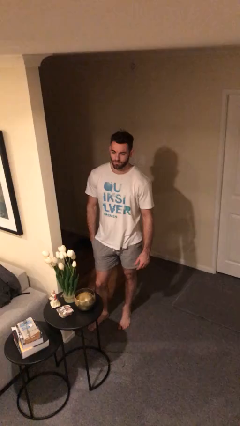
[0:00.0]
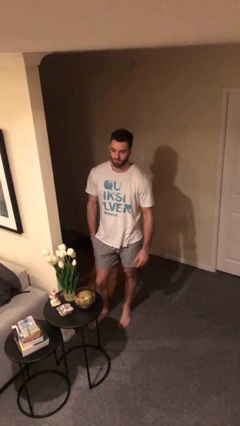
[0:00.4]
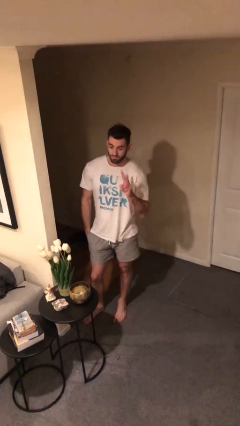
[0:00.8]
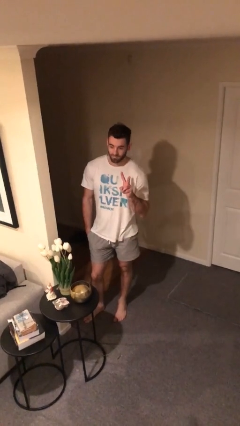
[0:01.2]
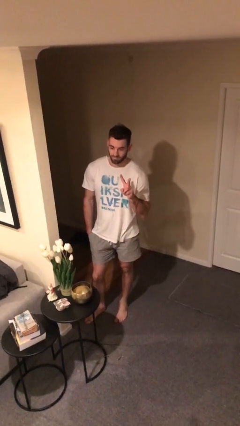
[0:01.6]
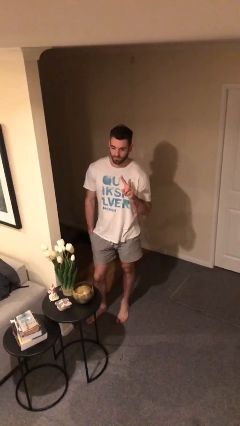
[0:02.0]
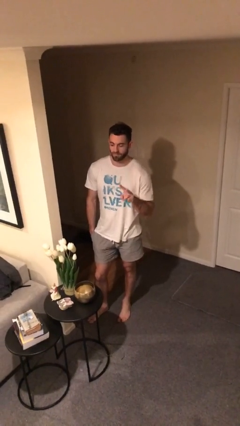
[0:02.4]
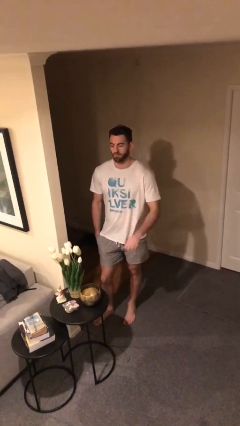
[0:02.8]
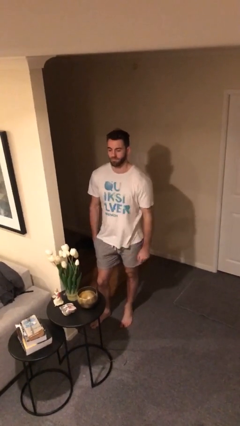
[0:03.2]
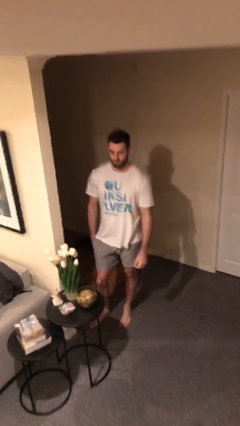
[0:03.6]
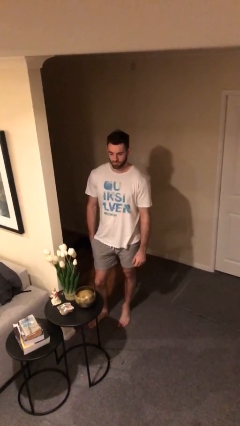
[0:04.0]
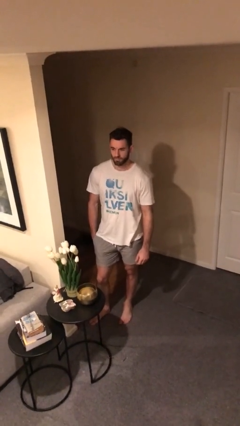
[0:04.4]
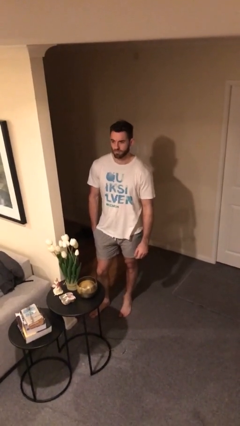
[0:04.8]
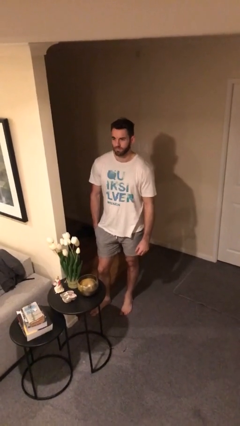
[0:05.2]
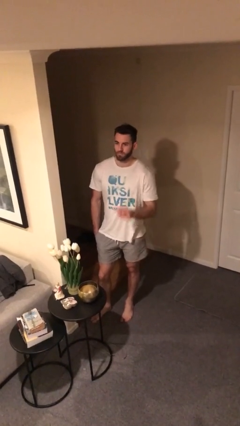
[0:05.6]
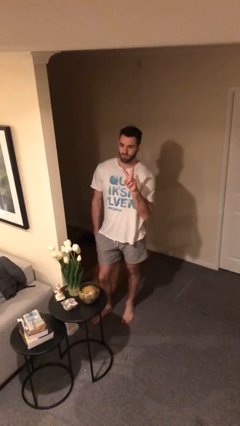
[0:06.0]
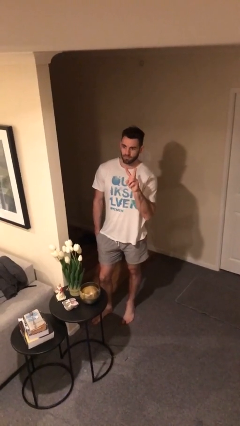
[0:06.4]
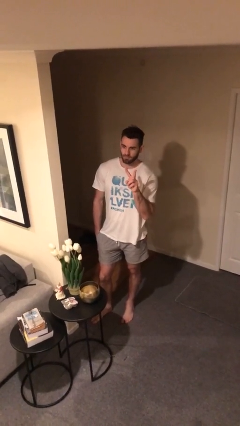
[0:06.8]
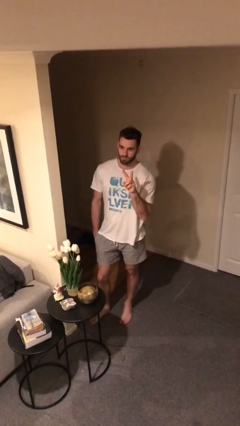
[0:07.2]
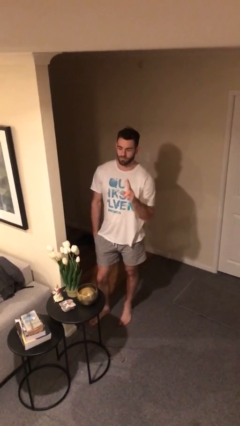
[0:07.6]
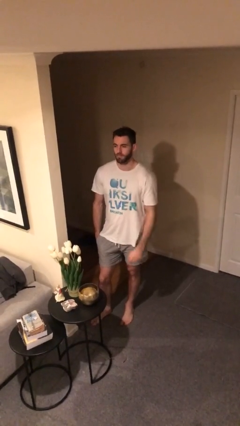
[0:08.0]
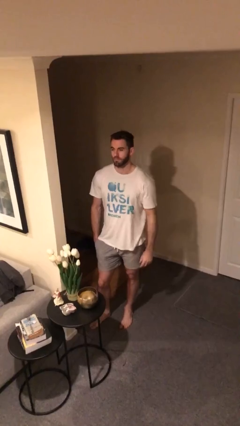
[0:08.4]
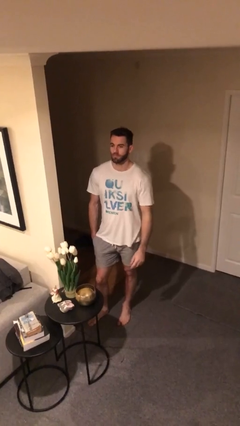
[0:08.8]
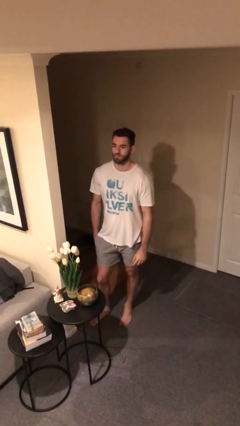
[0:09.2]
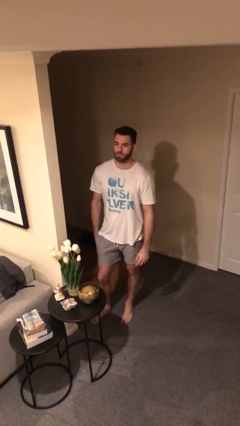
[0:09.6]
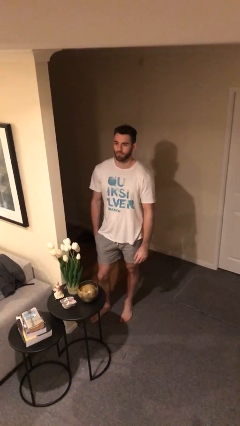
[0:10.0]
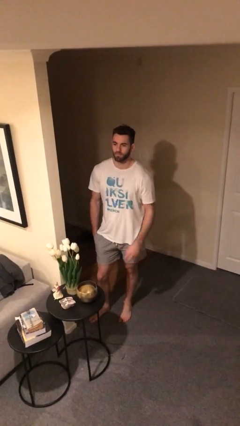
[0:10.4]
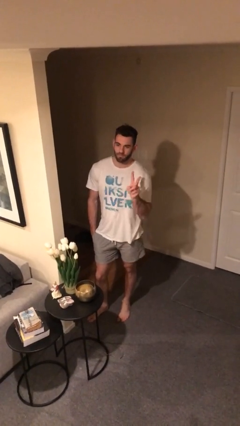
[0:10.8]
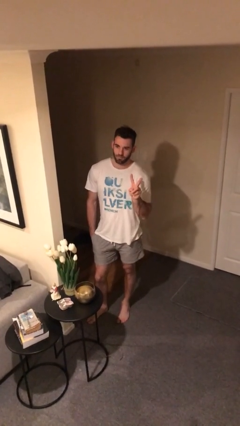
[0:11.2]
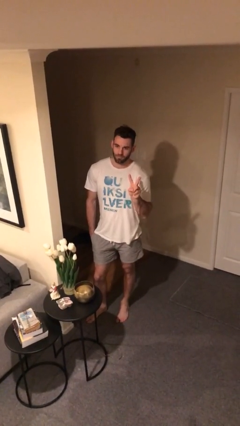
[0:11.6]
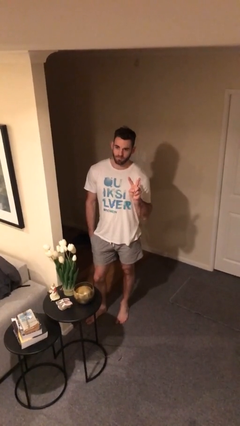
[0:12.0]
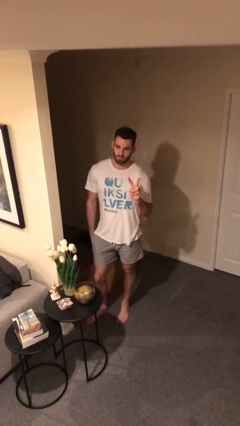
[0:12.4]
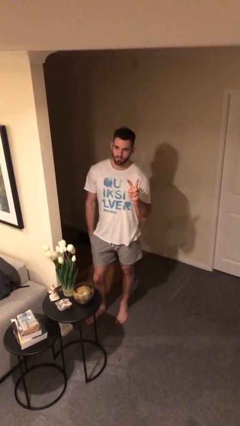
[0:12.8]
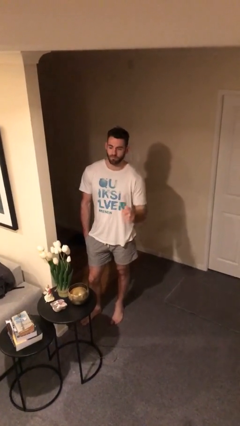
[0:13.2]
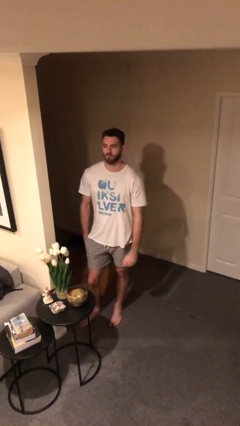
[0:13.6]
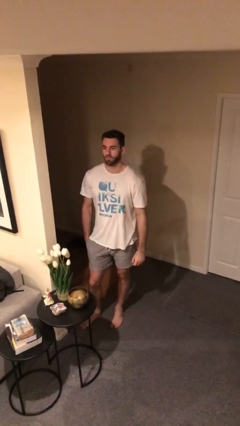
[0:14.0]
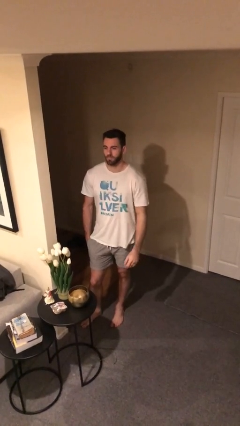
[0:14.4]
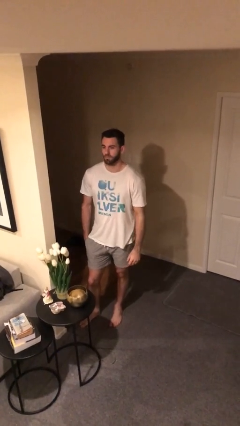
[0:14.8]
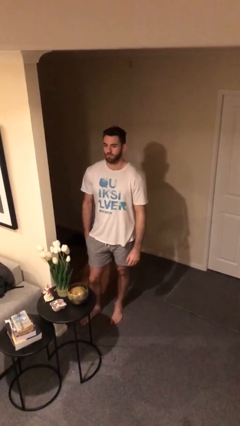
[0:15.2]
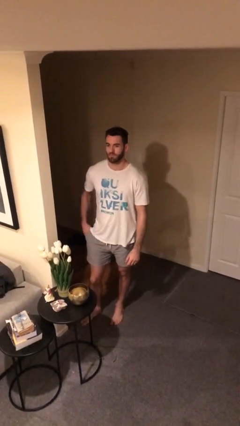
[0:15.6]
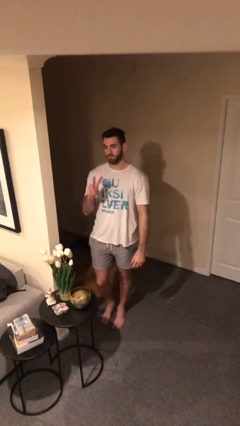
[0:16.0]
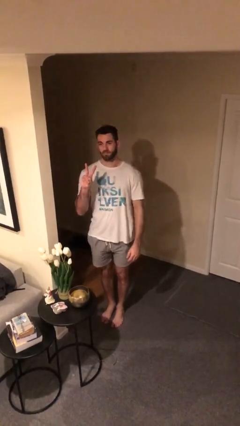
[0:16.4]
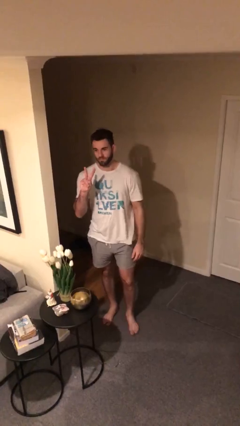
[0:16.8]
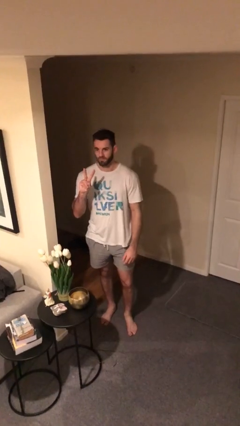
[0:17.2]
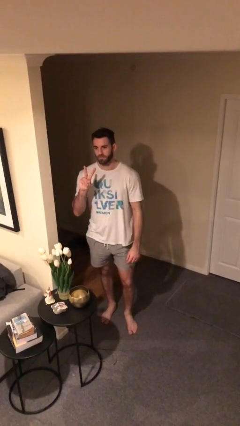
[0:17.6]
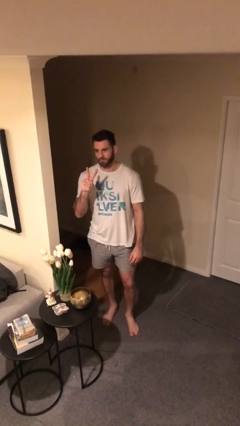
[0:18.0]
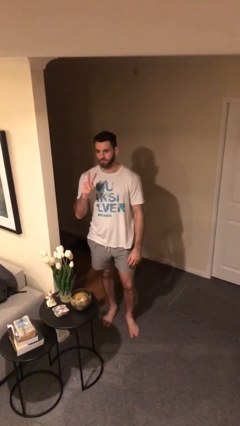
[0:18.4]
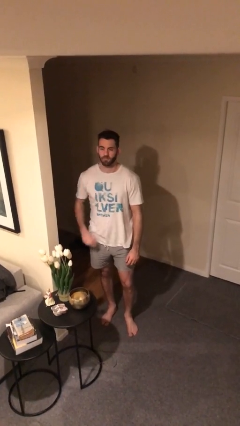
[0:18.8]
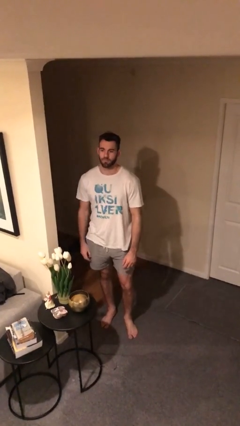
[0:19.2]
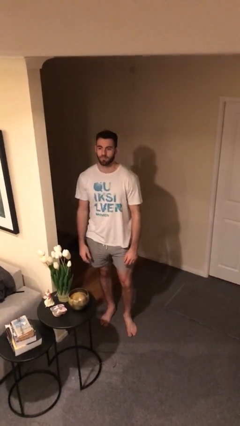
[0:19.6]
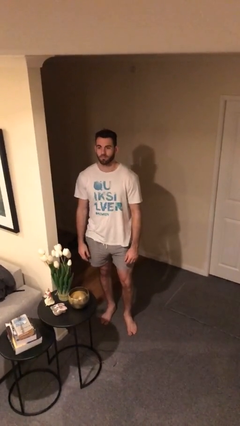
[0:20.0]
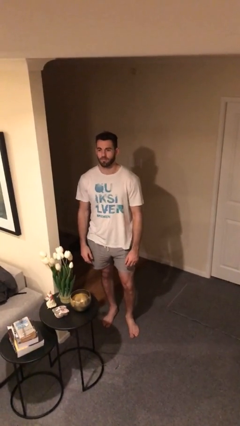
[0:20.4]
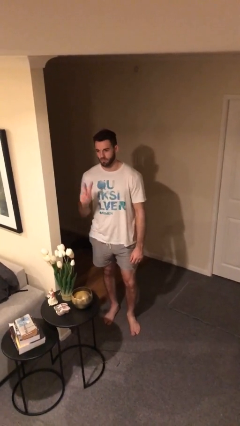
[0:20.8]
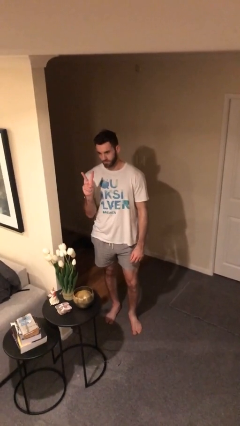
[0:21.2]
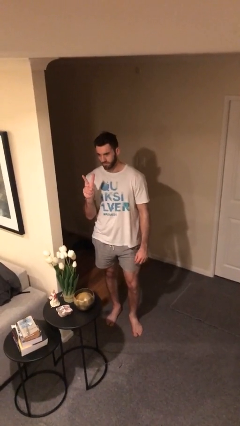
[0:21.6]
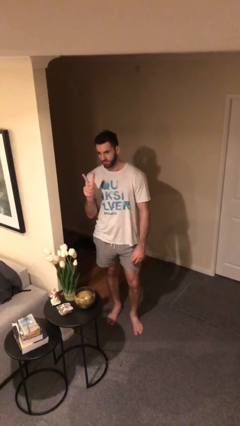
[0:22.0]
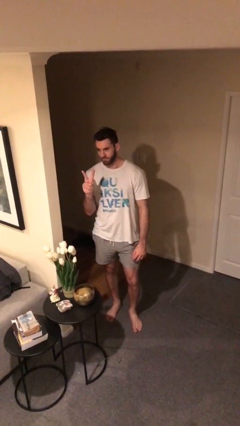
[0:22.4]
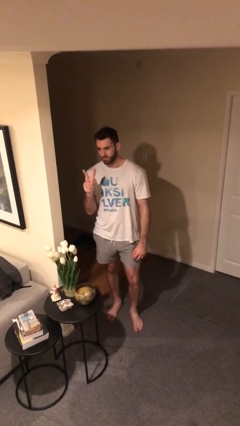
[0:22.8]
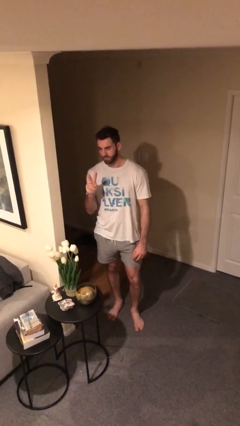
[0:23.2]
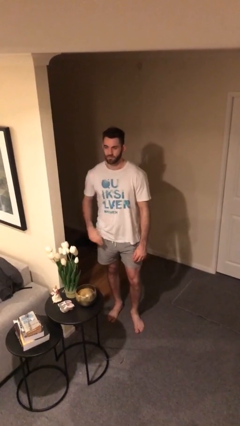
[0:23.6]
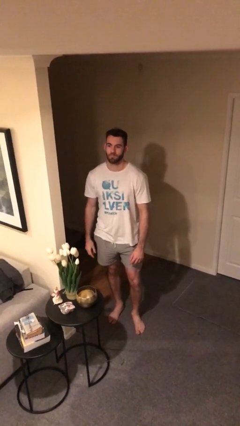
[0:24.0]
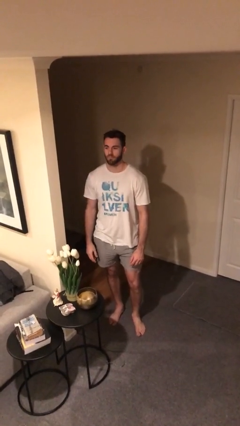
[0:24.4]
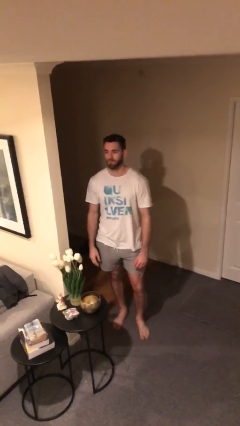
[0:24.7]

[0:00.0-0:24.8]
person gestures peace

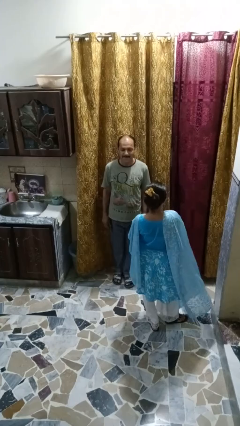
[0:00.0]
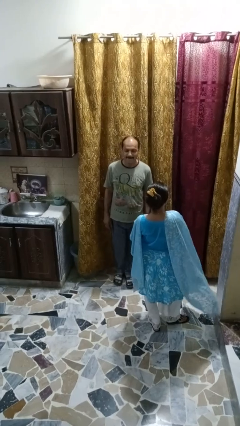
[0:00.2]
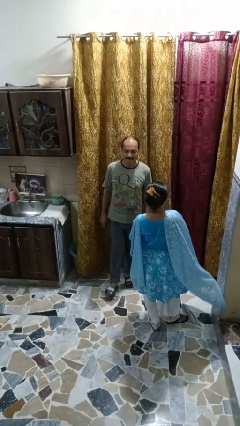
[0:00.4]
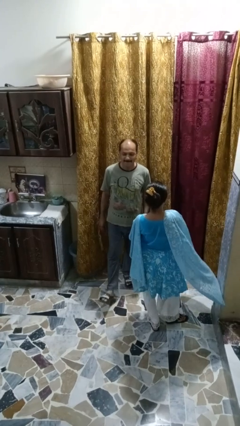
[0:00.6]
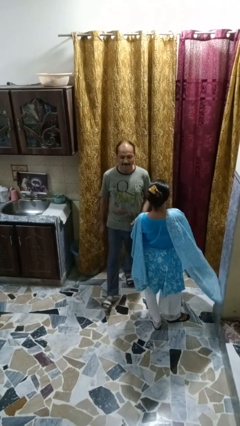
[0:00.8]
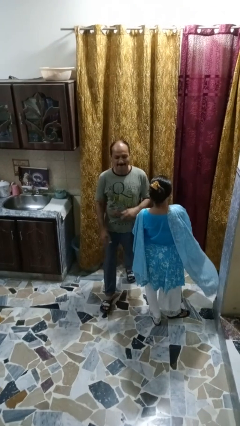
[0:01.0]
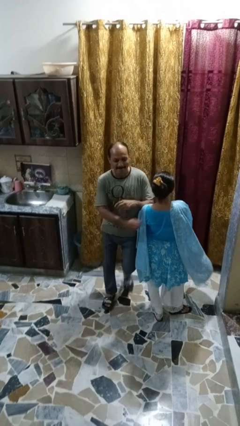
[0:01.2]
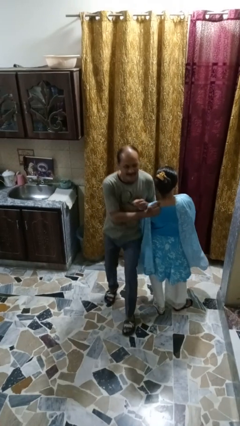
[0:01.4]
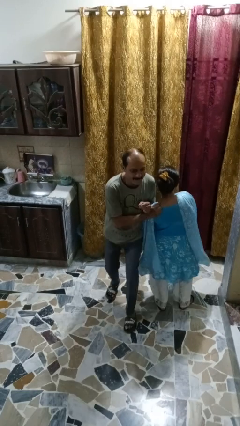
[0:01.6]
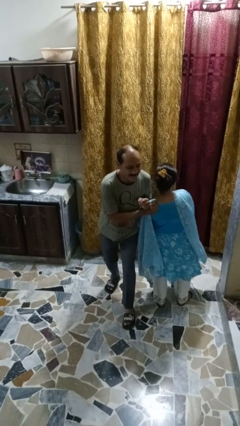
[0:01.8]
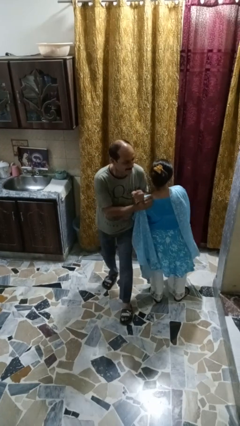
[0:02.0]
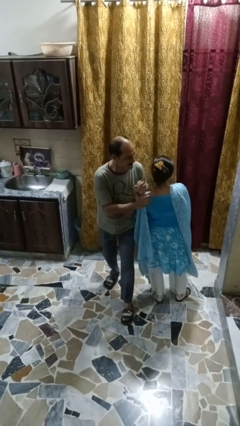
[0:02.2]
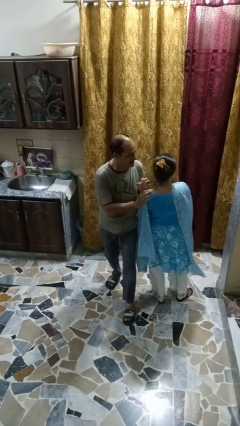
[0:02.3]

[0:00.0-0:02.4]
person bumps into person

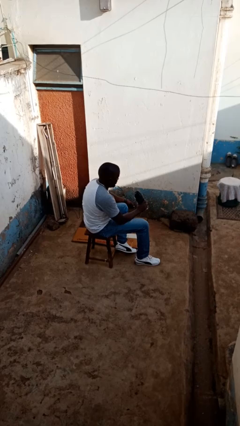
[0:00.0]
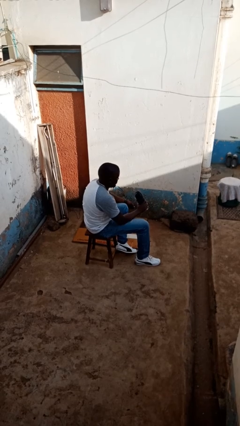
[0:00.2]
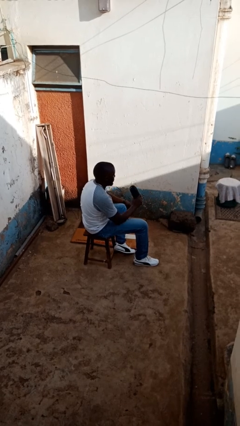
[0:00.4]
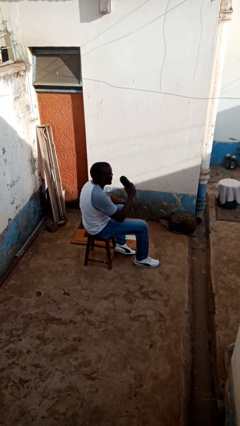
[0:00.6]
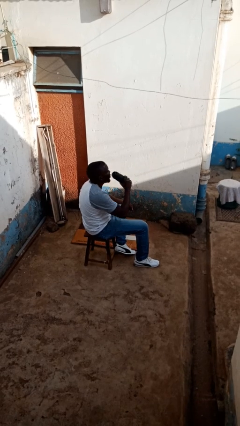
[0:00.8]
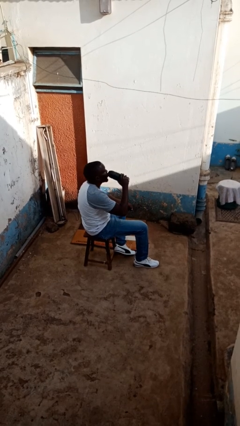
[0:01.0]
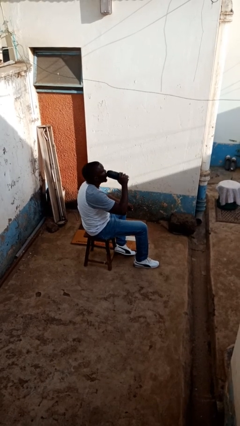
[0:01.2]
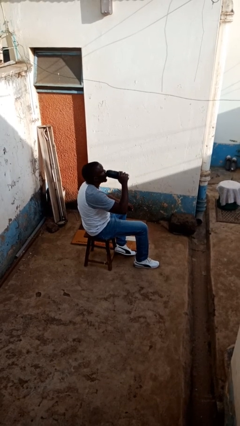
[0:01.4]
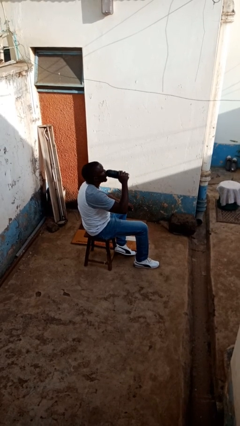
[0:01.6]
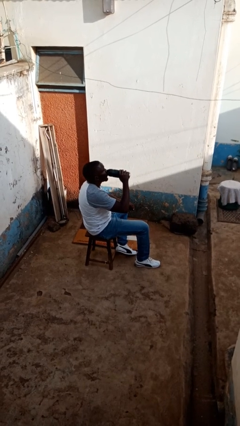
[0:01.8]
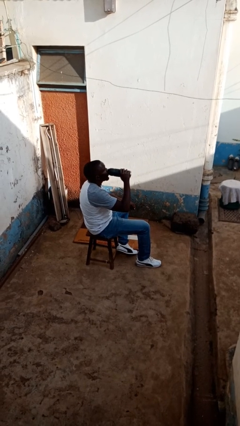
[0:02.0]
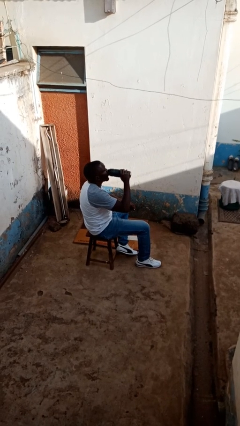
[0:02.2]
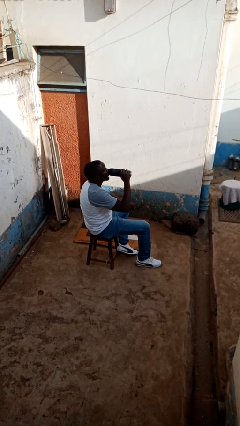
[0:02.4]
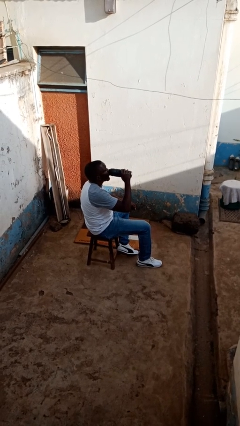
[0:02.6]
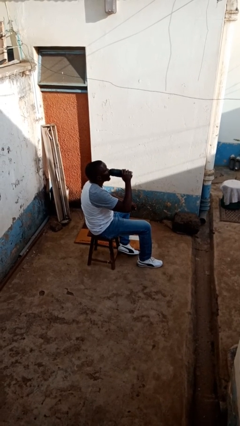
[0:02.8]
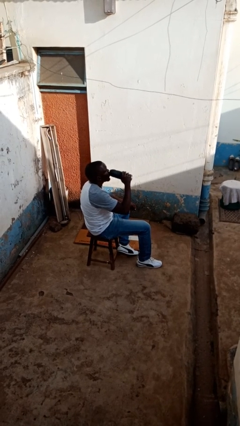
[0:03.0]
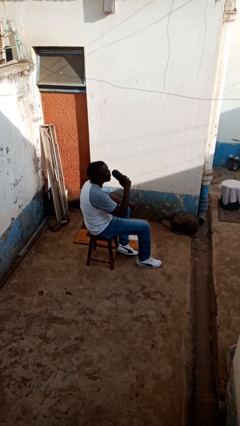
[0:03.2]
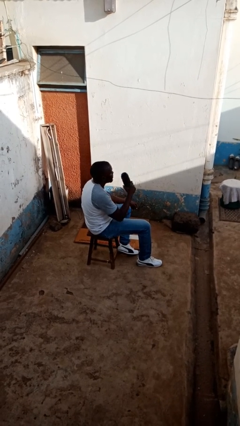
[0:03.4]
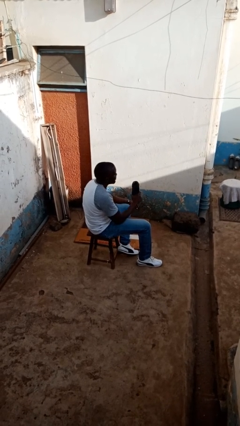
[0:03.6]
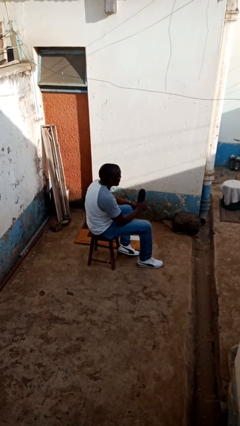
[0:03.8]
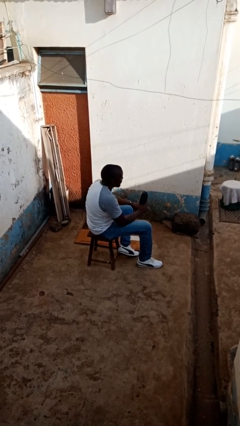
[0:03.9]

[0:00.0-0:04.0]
person drinks from bottle
